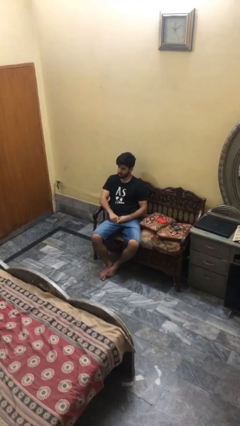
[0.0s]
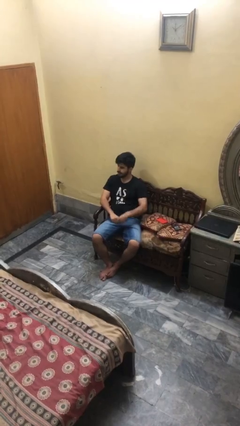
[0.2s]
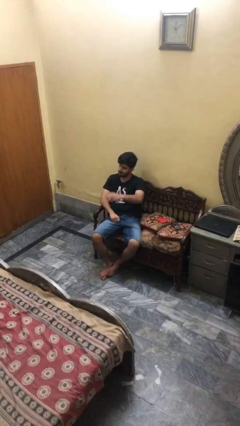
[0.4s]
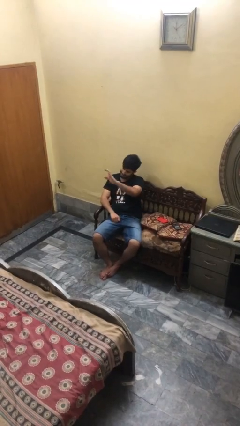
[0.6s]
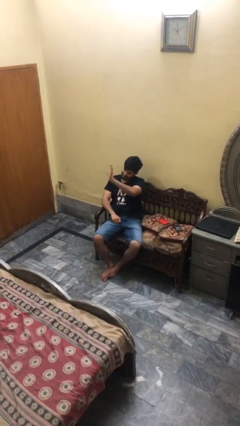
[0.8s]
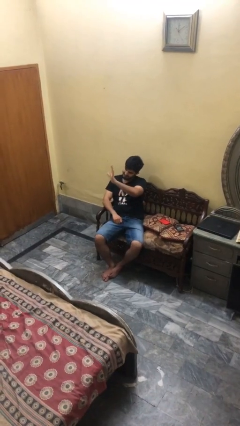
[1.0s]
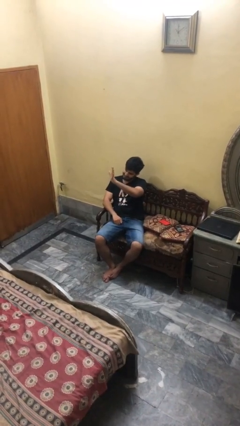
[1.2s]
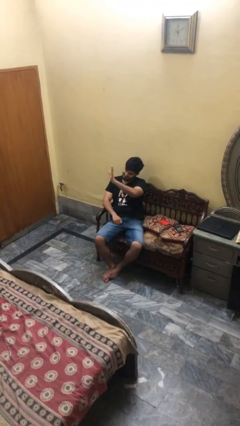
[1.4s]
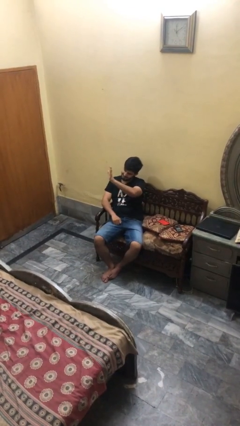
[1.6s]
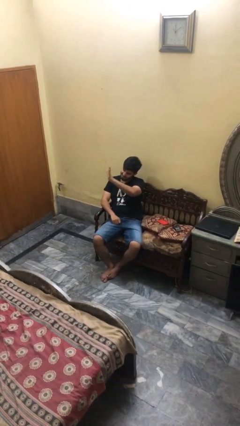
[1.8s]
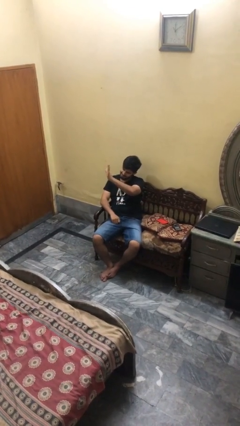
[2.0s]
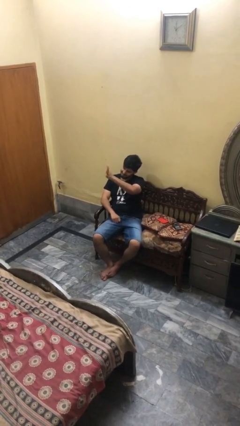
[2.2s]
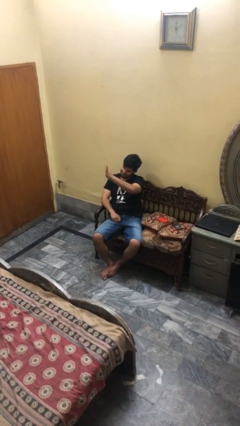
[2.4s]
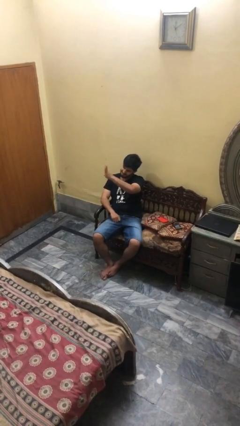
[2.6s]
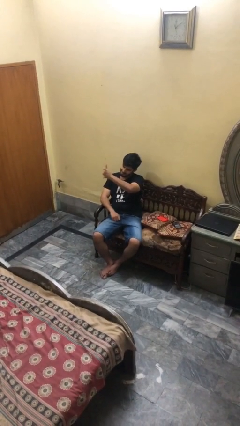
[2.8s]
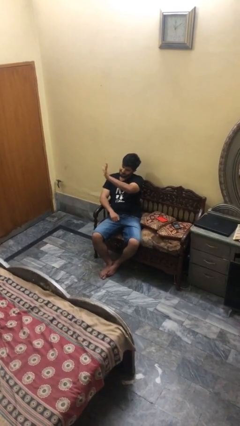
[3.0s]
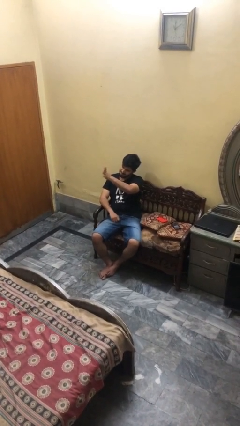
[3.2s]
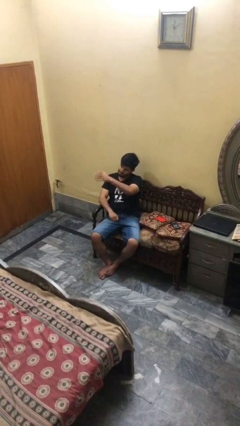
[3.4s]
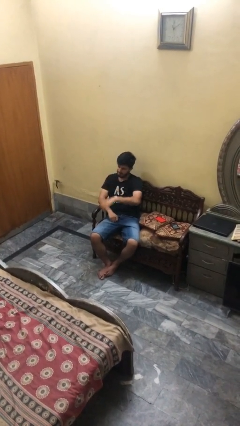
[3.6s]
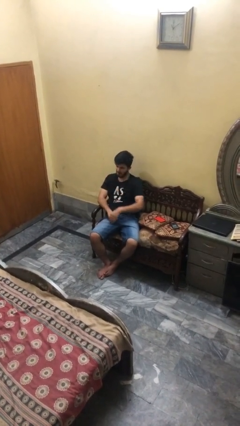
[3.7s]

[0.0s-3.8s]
person waves at person

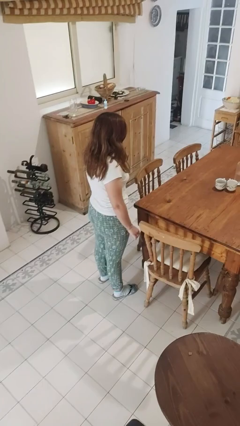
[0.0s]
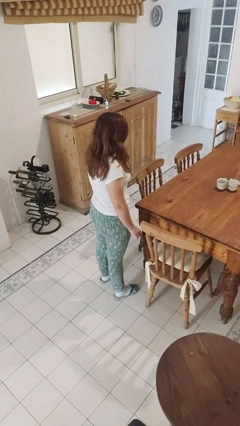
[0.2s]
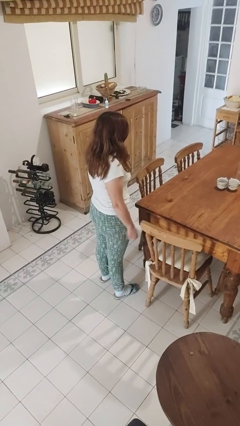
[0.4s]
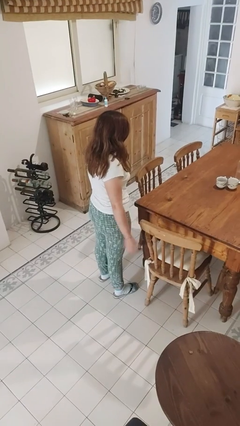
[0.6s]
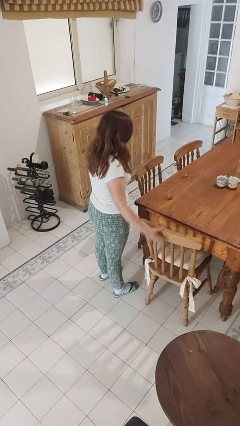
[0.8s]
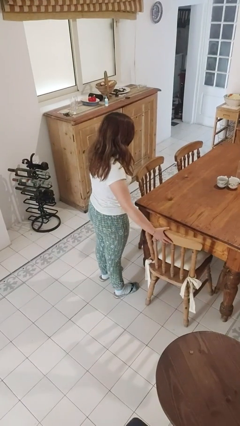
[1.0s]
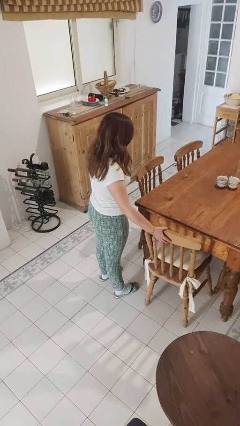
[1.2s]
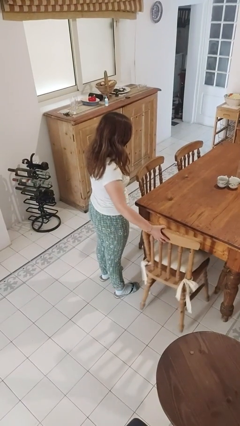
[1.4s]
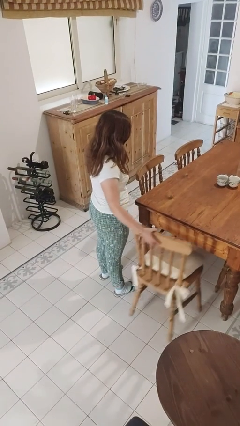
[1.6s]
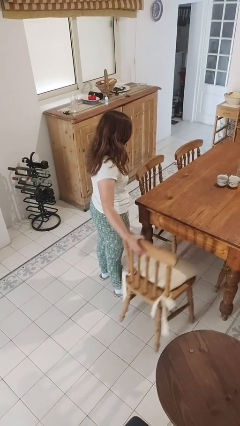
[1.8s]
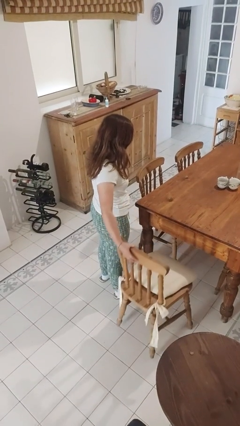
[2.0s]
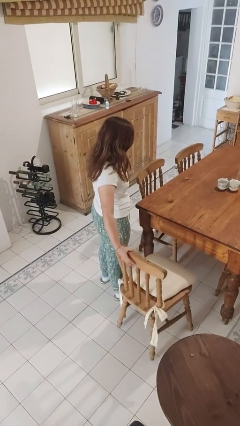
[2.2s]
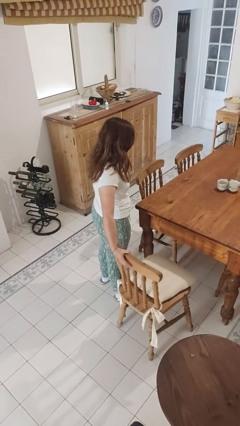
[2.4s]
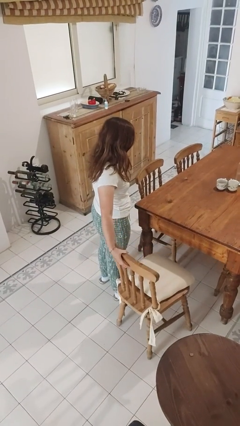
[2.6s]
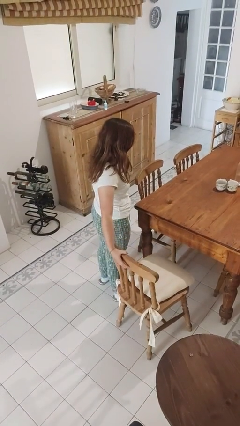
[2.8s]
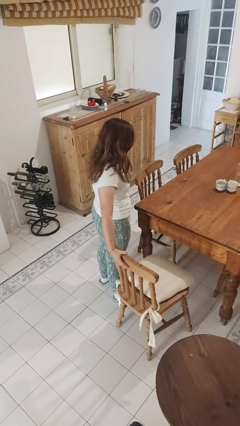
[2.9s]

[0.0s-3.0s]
person pulls out chair

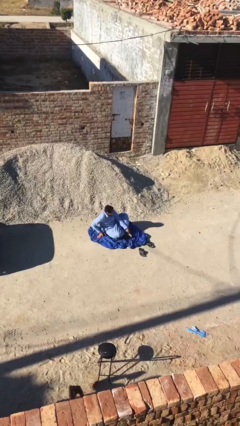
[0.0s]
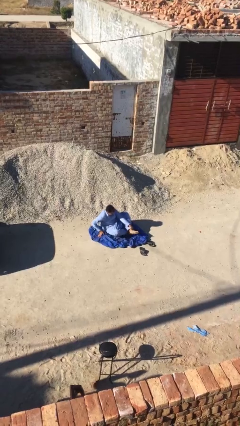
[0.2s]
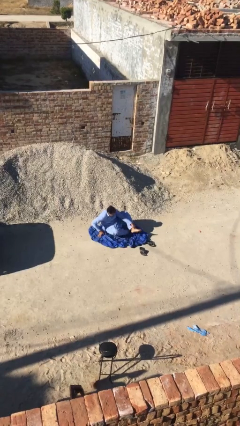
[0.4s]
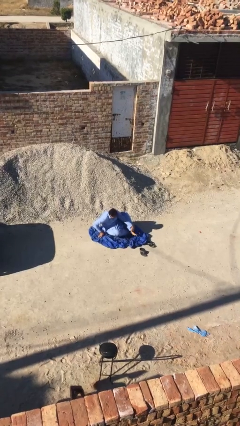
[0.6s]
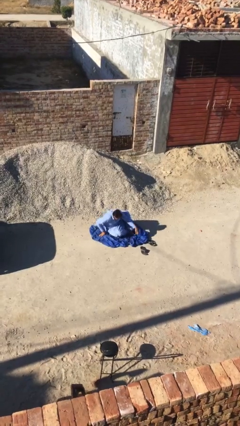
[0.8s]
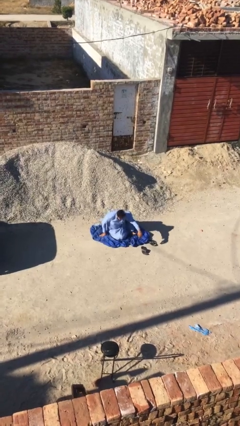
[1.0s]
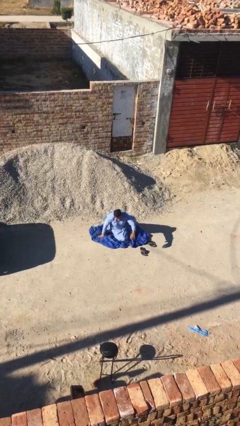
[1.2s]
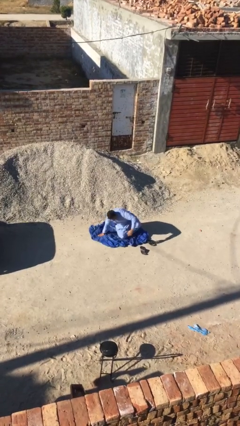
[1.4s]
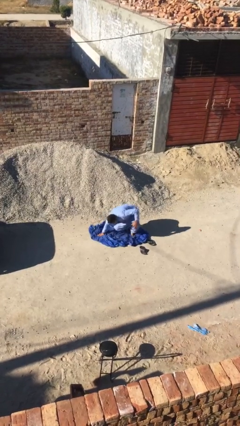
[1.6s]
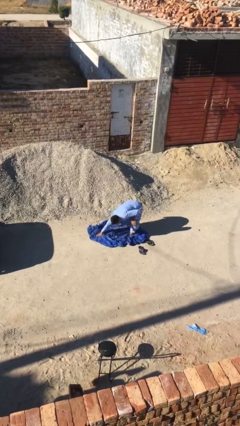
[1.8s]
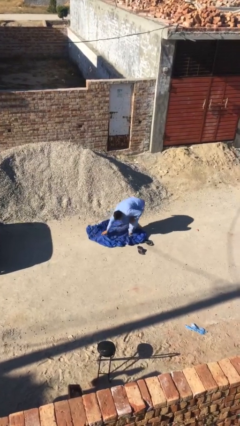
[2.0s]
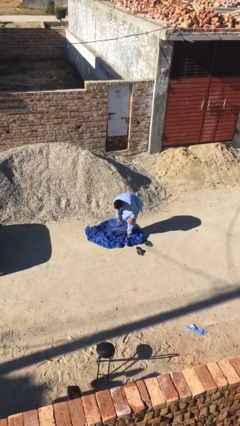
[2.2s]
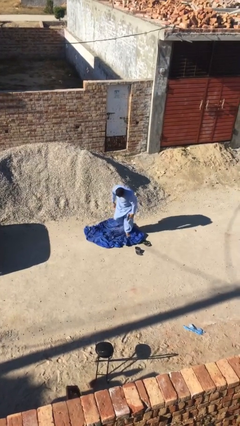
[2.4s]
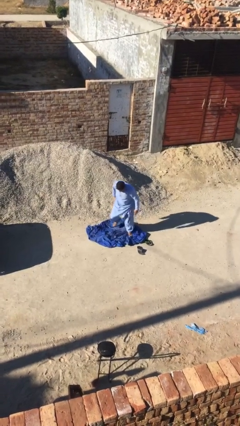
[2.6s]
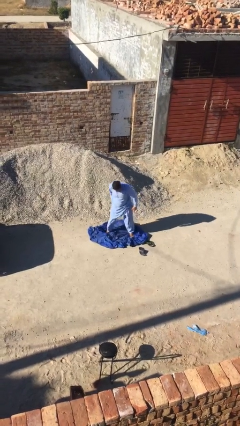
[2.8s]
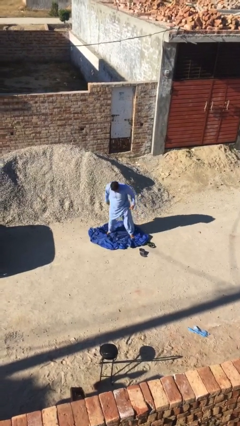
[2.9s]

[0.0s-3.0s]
person stands up

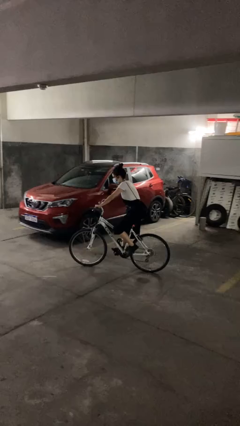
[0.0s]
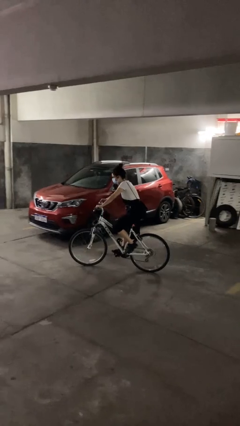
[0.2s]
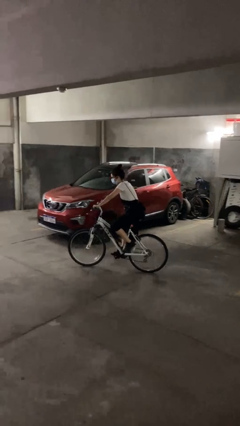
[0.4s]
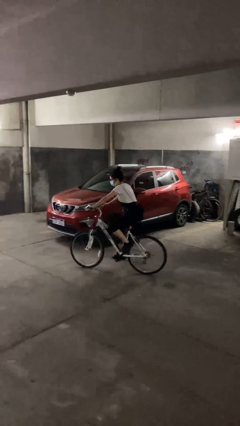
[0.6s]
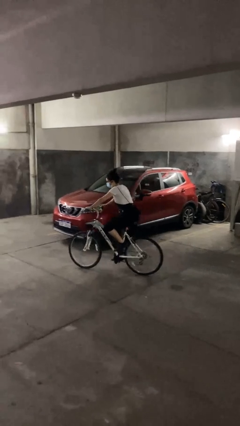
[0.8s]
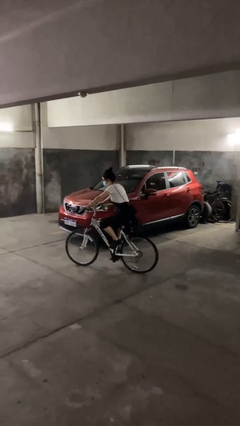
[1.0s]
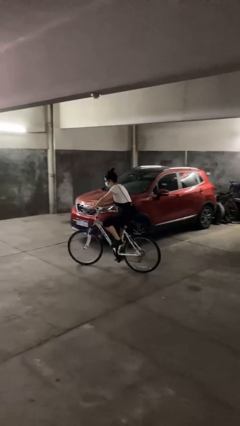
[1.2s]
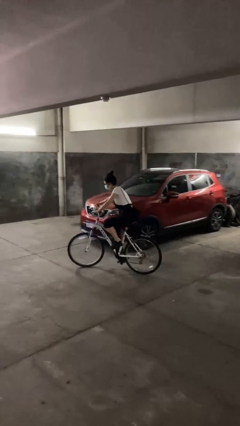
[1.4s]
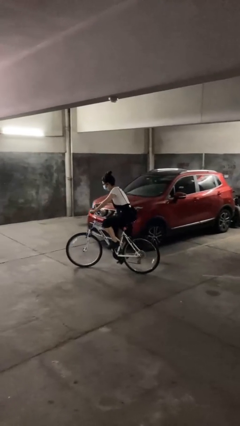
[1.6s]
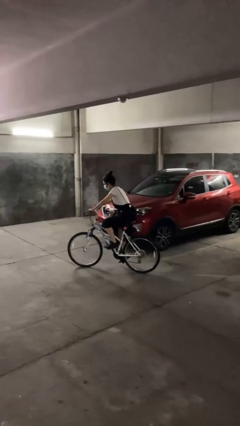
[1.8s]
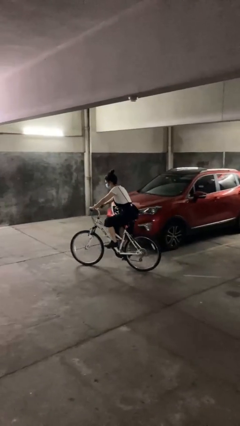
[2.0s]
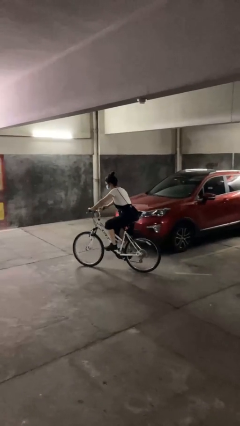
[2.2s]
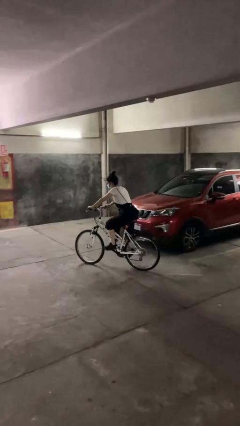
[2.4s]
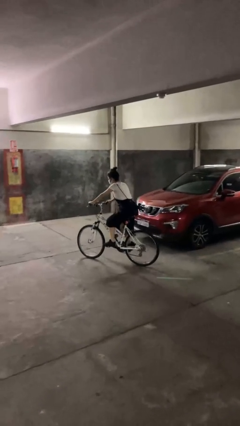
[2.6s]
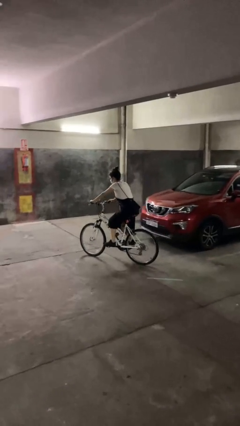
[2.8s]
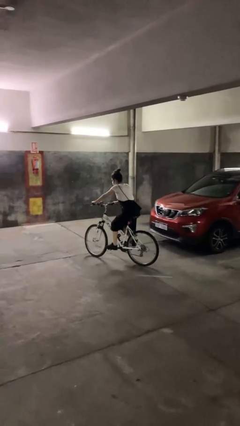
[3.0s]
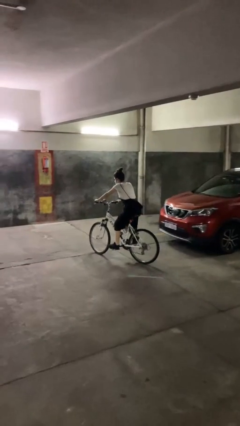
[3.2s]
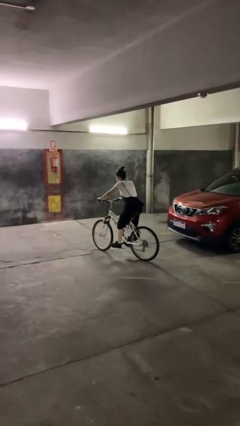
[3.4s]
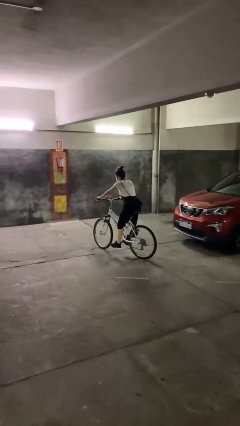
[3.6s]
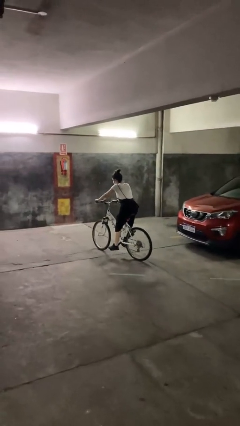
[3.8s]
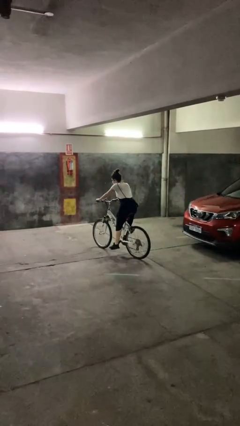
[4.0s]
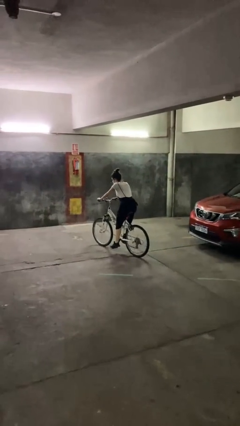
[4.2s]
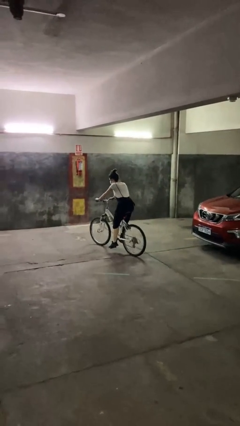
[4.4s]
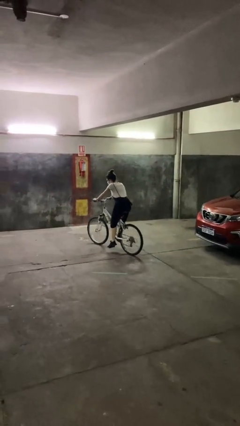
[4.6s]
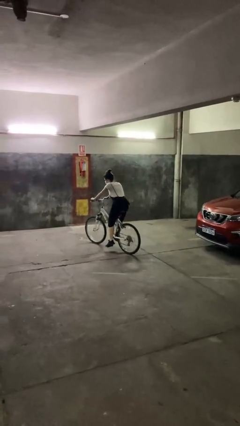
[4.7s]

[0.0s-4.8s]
person rides bicycle

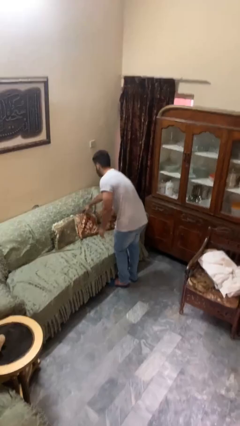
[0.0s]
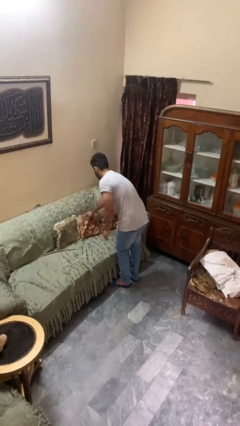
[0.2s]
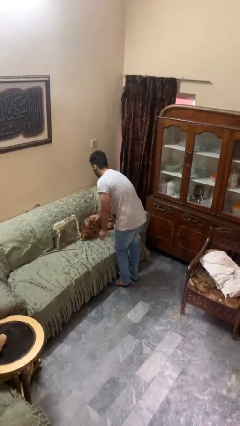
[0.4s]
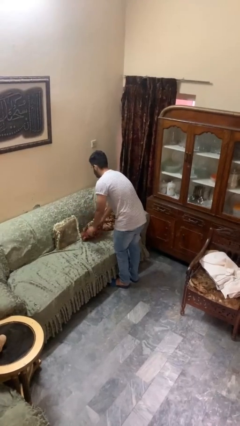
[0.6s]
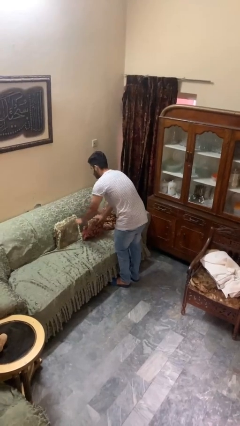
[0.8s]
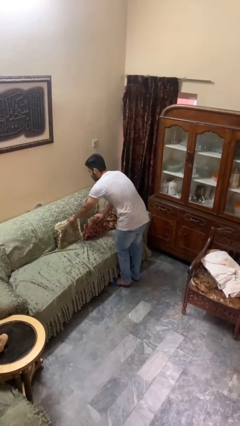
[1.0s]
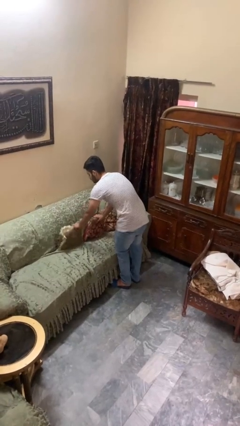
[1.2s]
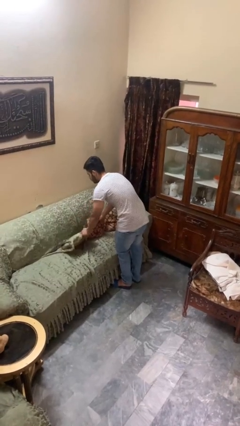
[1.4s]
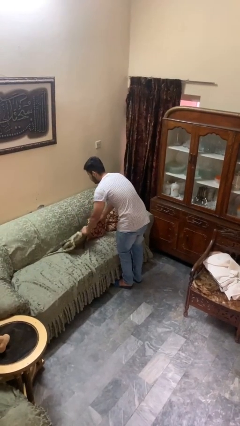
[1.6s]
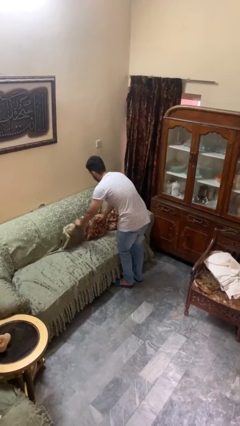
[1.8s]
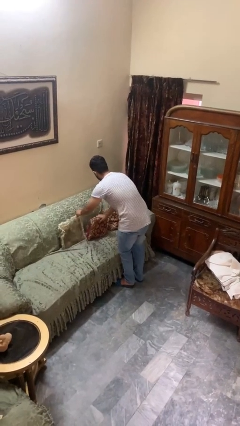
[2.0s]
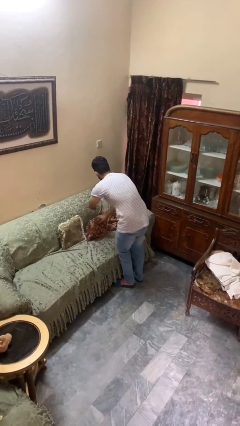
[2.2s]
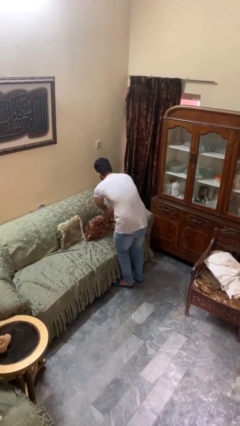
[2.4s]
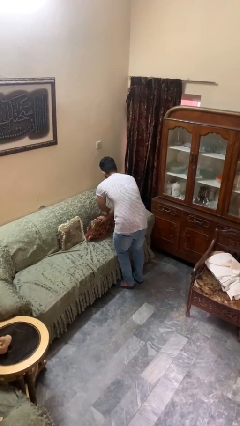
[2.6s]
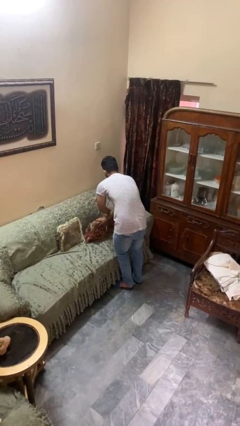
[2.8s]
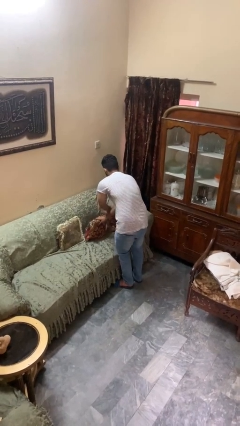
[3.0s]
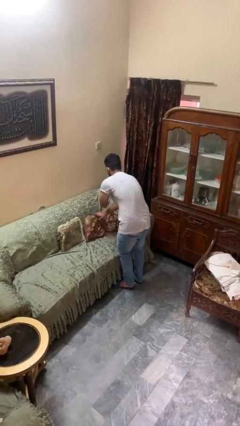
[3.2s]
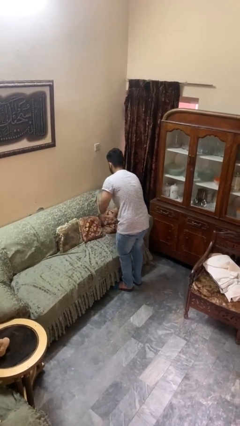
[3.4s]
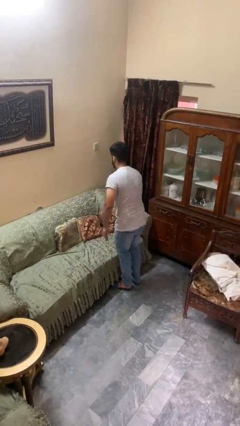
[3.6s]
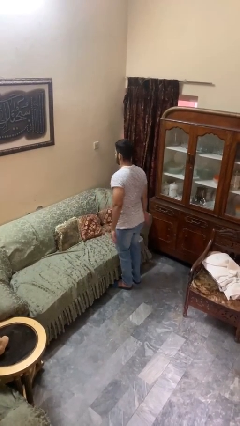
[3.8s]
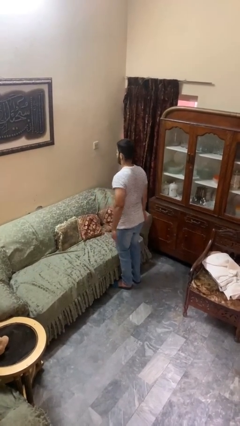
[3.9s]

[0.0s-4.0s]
person searches in couch
